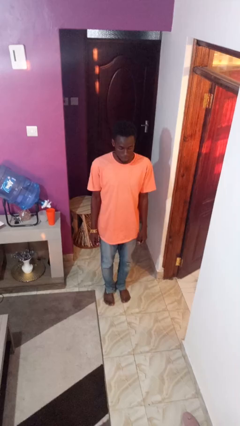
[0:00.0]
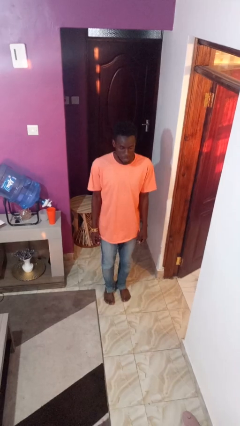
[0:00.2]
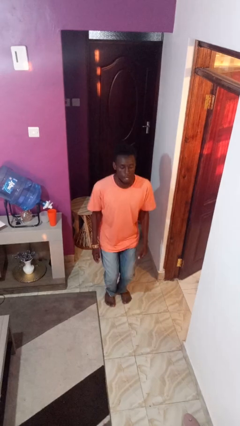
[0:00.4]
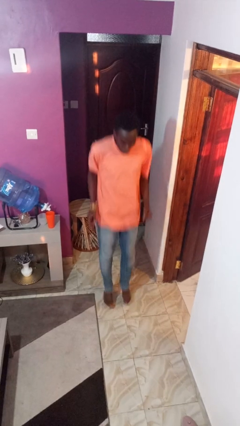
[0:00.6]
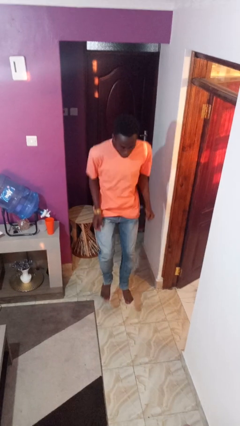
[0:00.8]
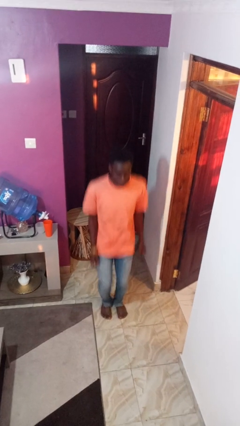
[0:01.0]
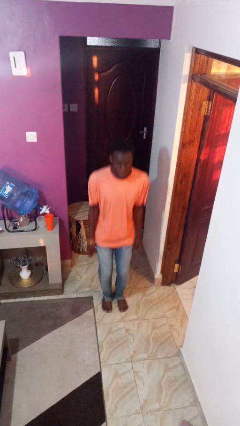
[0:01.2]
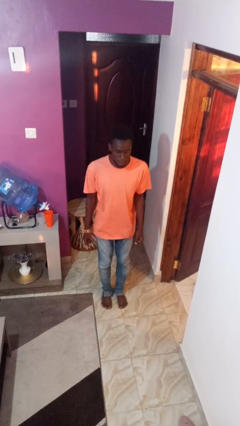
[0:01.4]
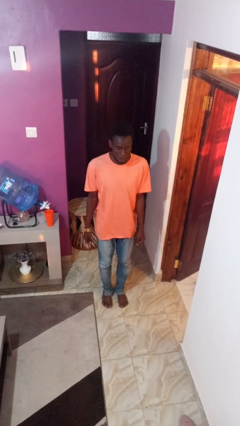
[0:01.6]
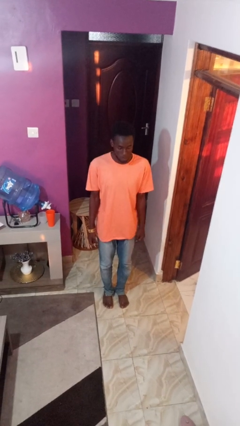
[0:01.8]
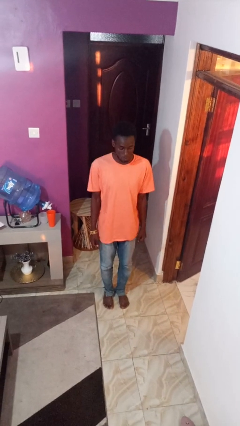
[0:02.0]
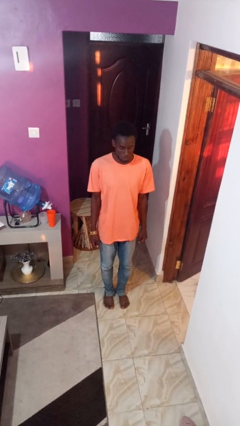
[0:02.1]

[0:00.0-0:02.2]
person jumps

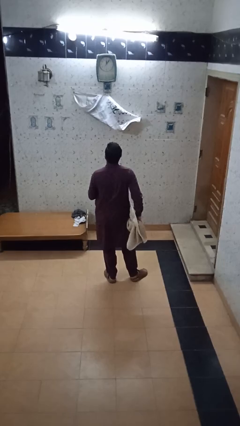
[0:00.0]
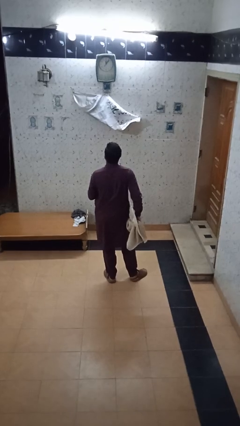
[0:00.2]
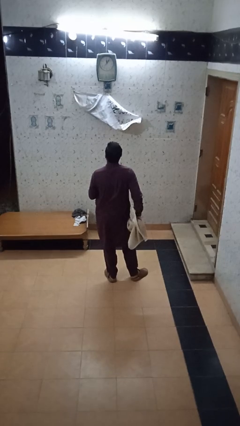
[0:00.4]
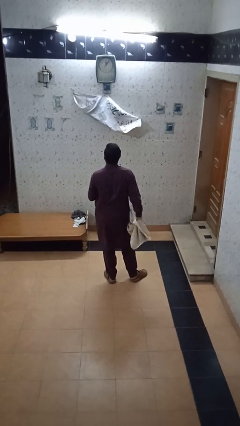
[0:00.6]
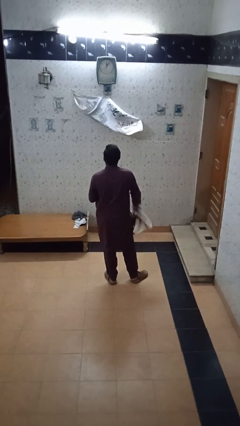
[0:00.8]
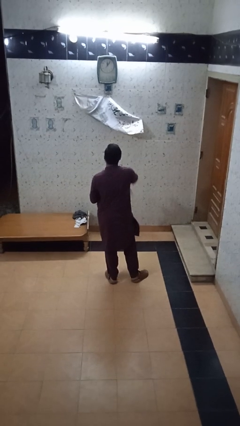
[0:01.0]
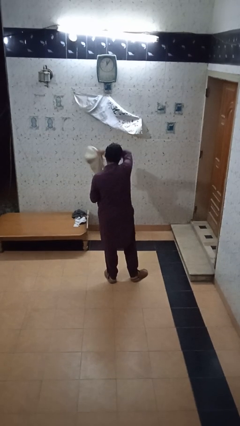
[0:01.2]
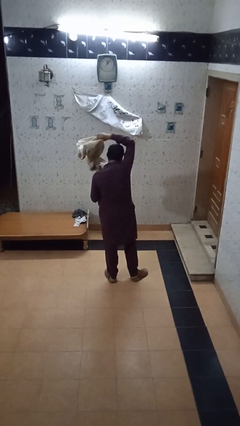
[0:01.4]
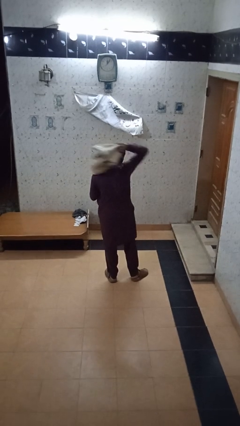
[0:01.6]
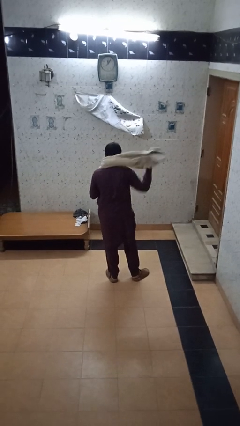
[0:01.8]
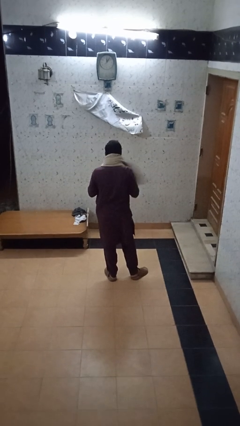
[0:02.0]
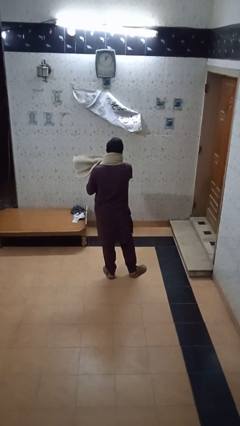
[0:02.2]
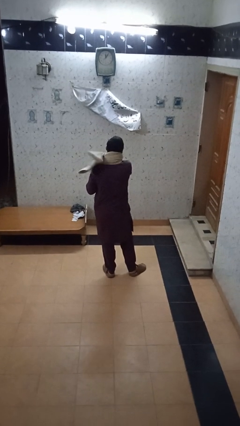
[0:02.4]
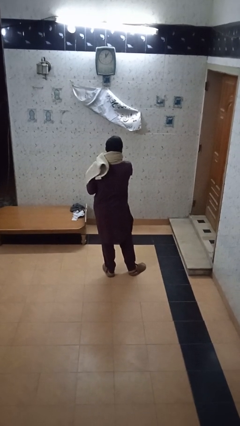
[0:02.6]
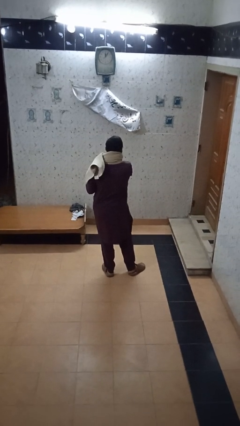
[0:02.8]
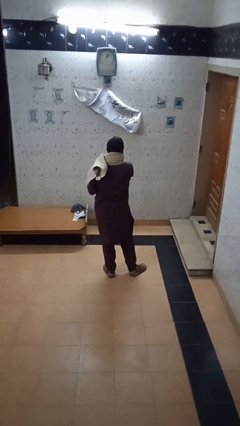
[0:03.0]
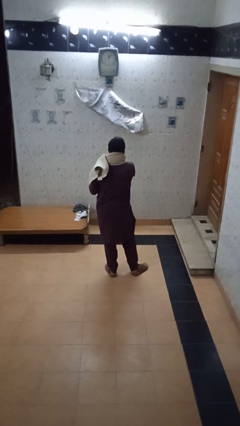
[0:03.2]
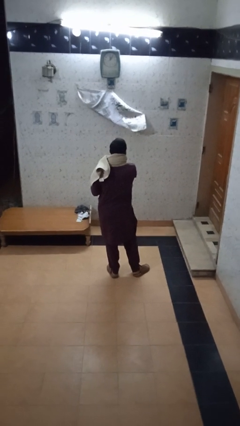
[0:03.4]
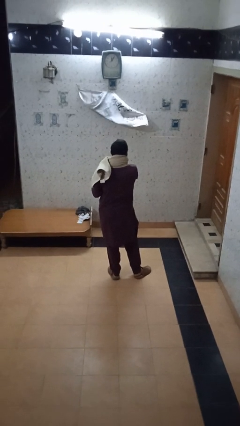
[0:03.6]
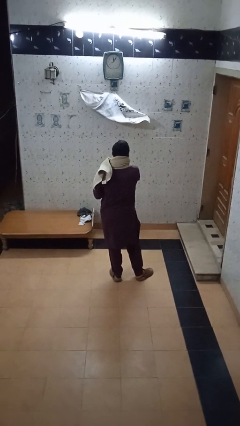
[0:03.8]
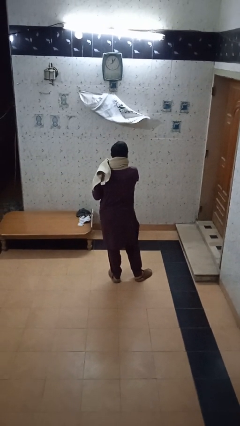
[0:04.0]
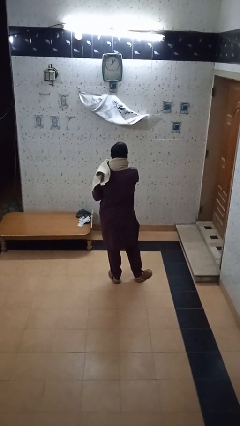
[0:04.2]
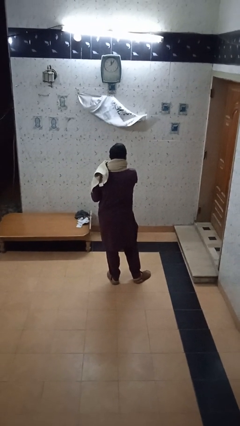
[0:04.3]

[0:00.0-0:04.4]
person puts on scarf

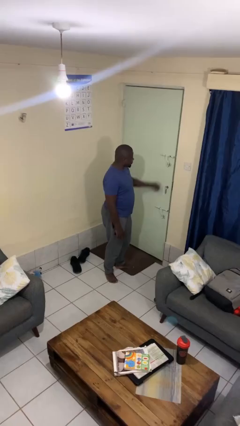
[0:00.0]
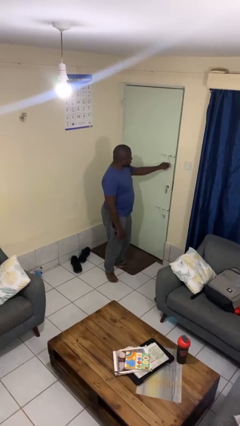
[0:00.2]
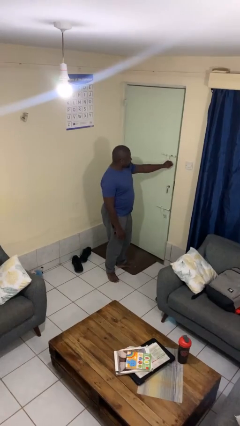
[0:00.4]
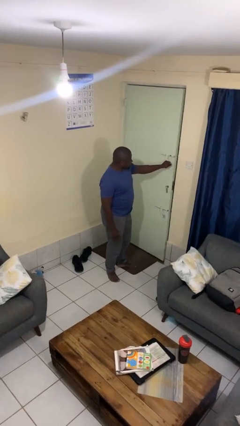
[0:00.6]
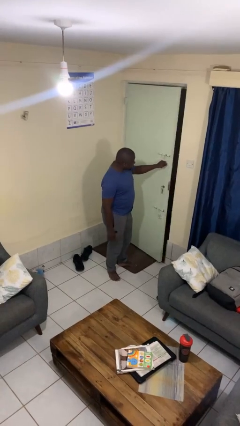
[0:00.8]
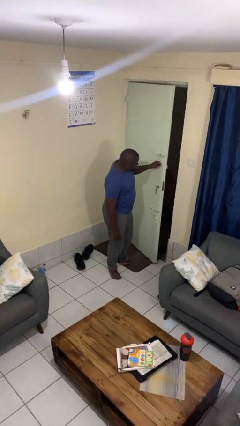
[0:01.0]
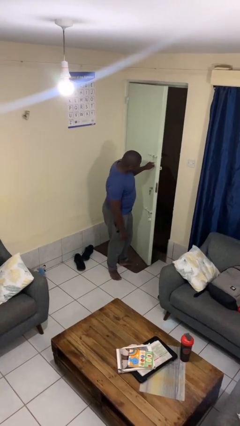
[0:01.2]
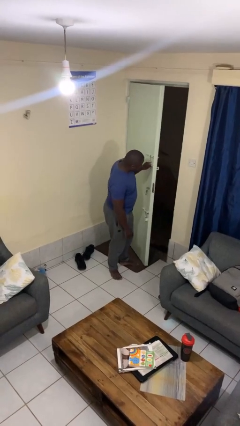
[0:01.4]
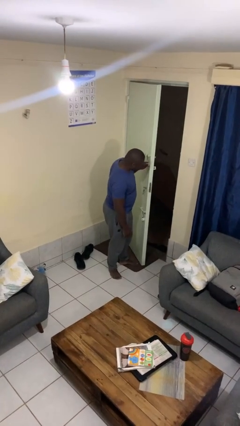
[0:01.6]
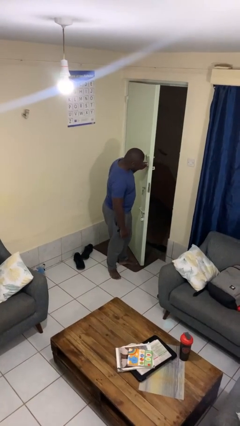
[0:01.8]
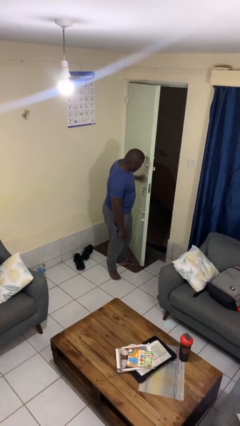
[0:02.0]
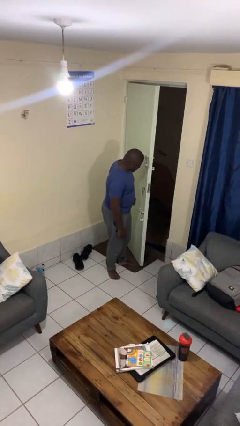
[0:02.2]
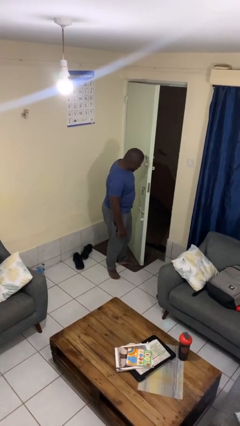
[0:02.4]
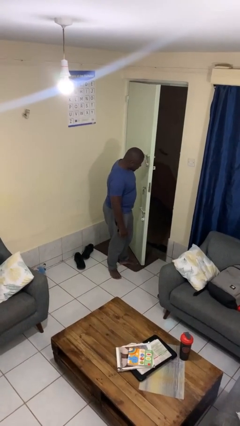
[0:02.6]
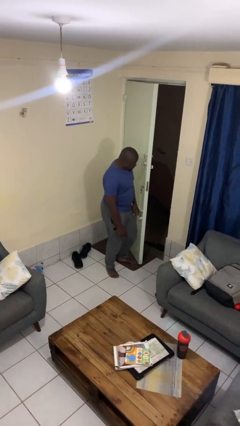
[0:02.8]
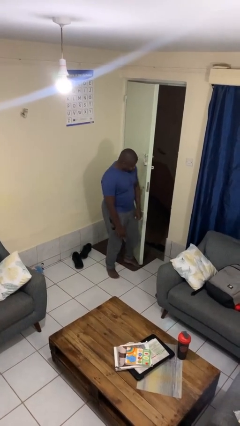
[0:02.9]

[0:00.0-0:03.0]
person opens facility door

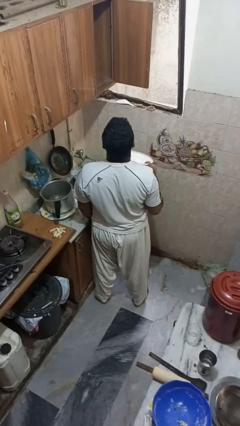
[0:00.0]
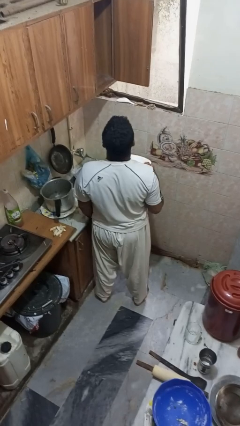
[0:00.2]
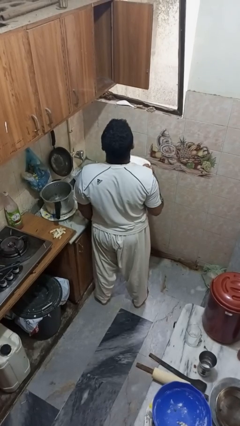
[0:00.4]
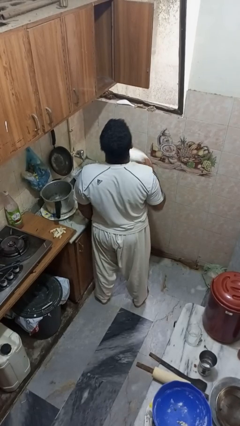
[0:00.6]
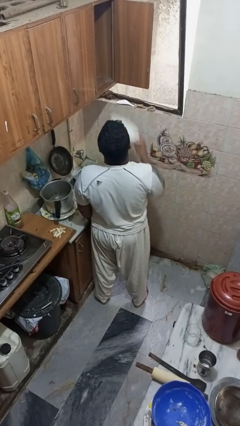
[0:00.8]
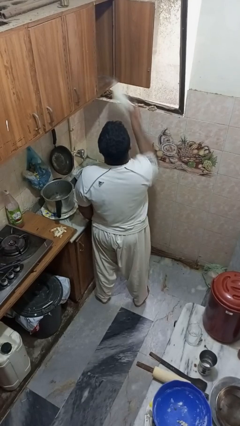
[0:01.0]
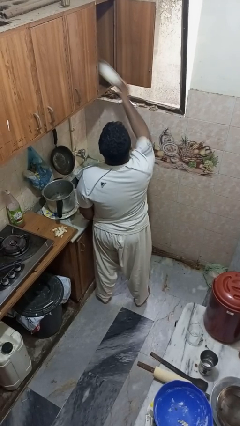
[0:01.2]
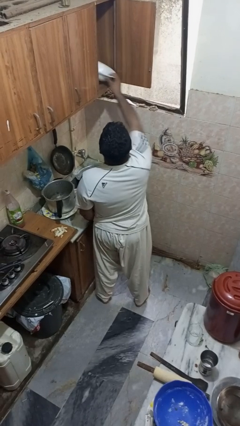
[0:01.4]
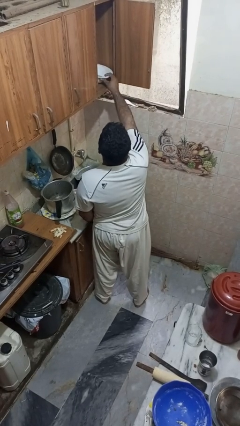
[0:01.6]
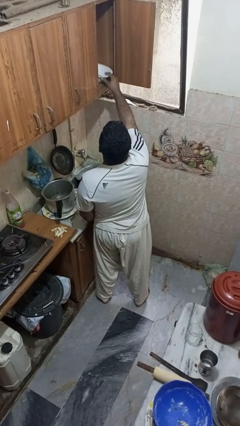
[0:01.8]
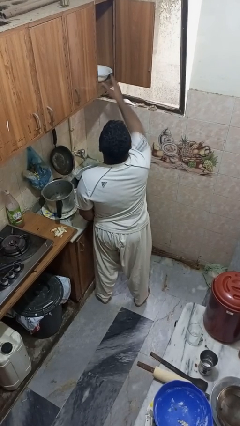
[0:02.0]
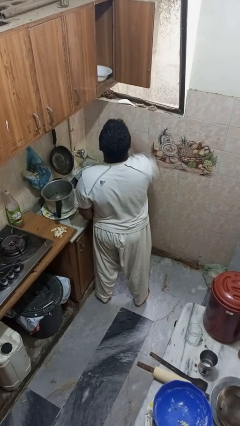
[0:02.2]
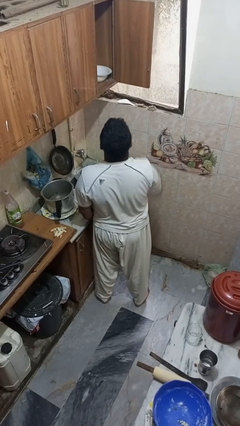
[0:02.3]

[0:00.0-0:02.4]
person puts object in cabinet

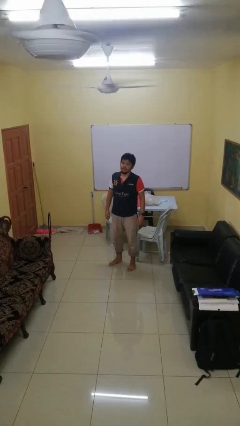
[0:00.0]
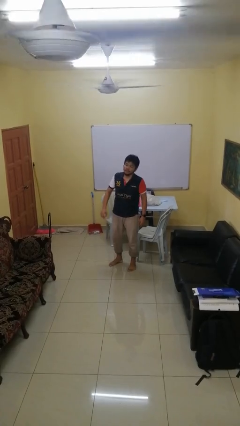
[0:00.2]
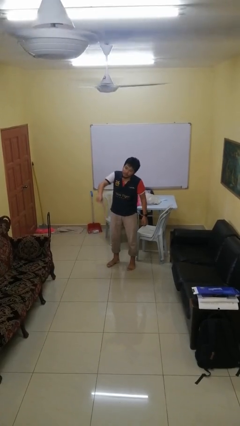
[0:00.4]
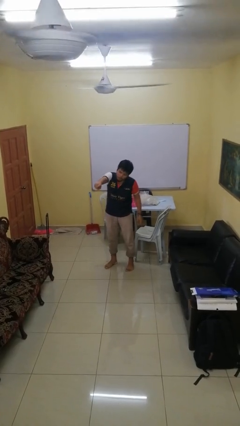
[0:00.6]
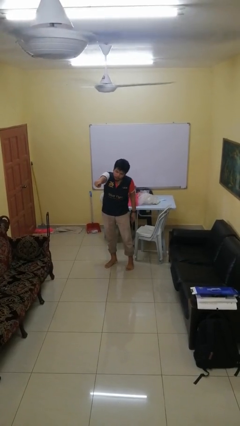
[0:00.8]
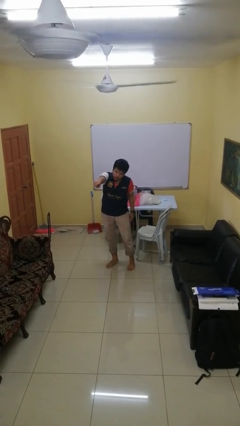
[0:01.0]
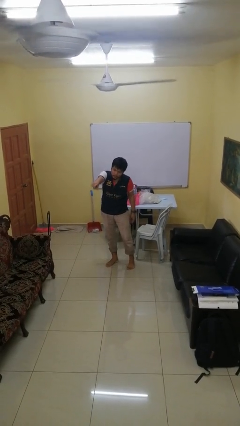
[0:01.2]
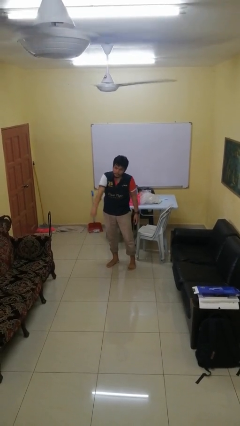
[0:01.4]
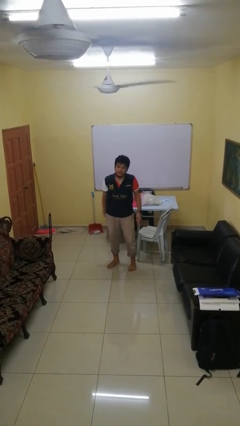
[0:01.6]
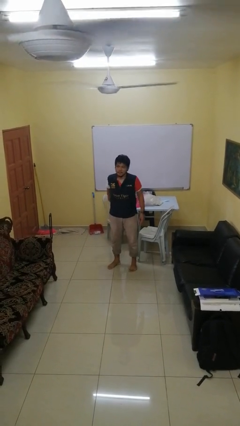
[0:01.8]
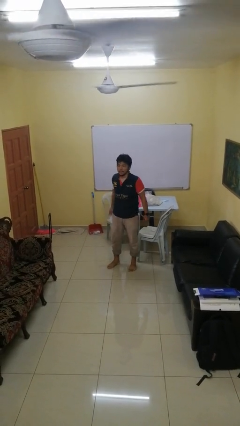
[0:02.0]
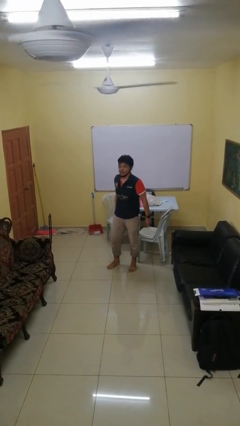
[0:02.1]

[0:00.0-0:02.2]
person points at person

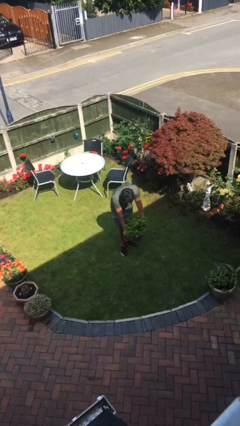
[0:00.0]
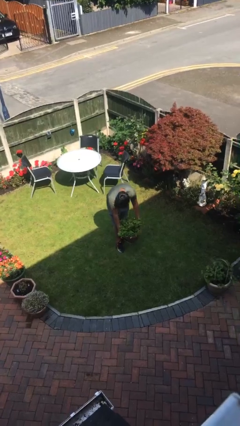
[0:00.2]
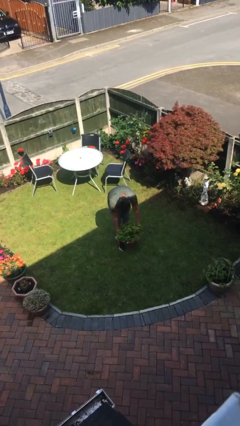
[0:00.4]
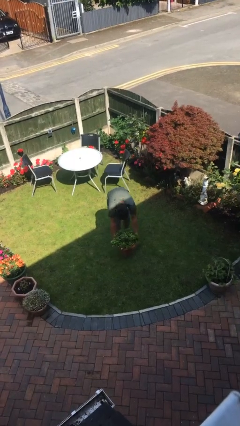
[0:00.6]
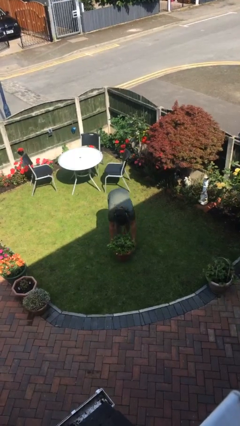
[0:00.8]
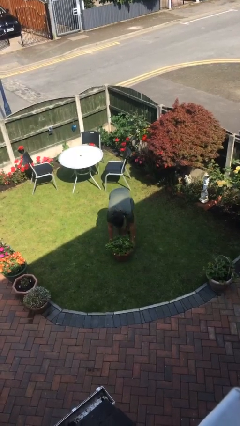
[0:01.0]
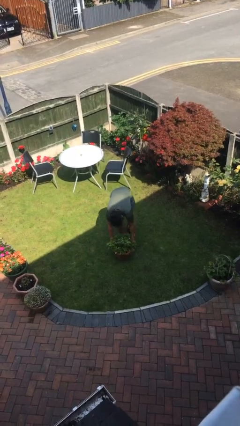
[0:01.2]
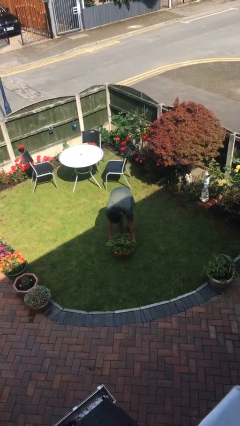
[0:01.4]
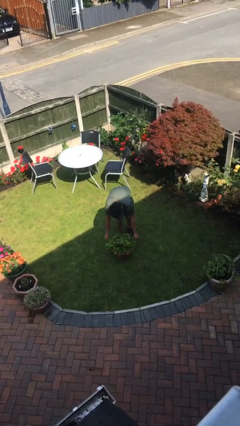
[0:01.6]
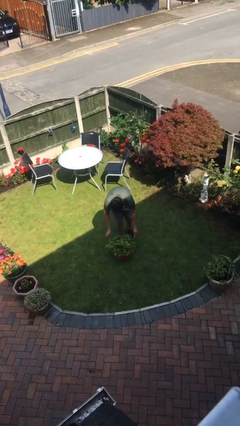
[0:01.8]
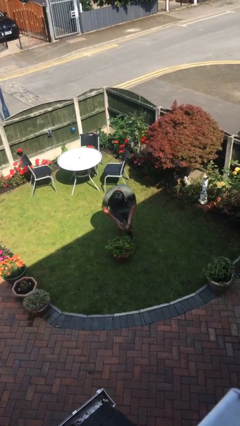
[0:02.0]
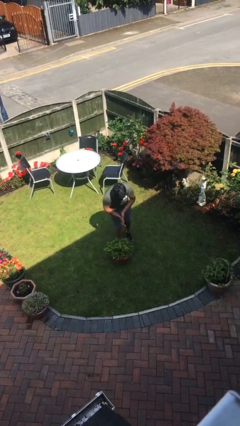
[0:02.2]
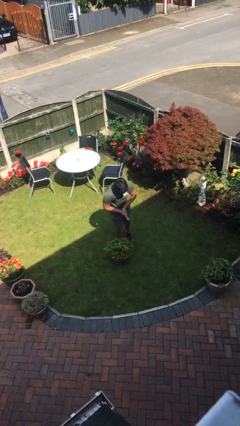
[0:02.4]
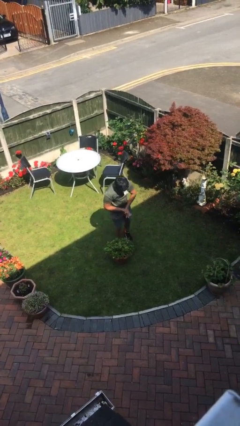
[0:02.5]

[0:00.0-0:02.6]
person puts down object on floor

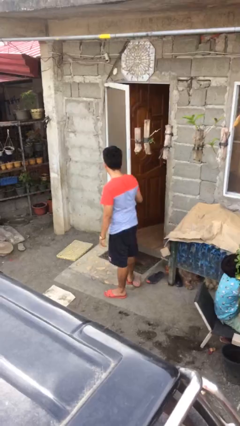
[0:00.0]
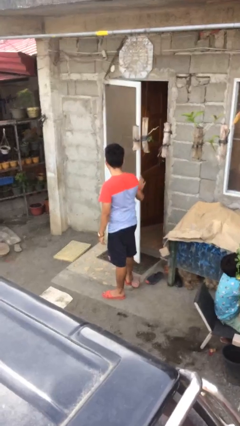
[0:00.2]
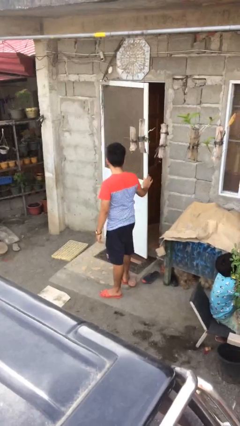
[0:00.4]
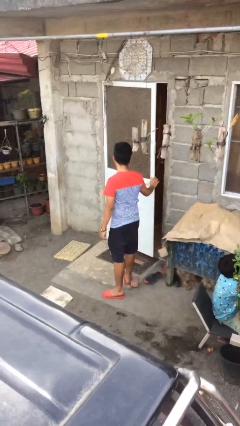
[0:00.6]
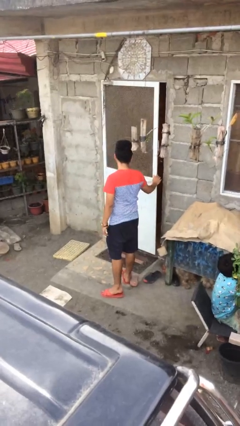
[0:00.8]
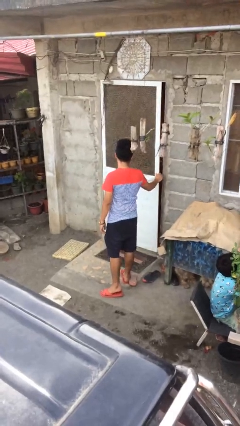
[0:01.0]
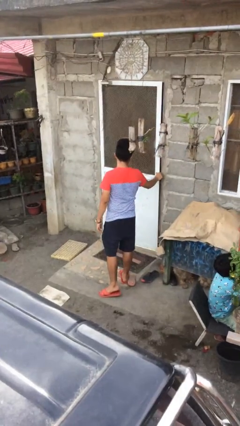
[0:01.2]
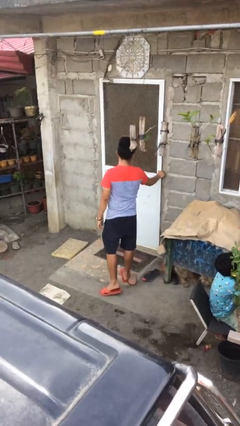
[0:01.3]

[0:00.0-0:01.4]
person closes facility door
